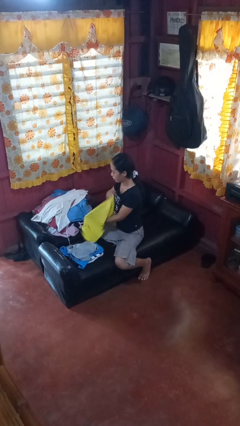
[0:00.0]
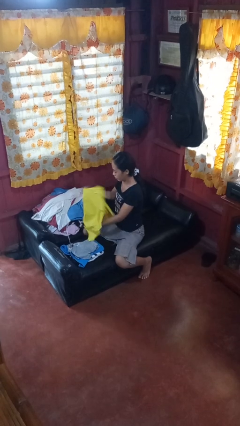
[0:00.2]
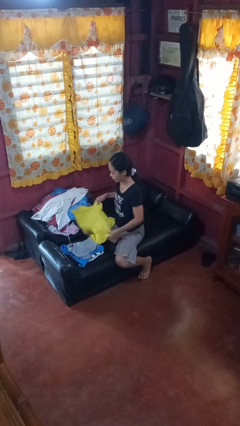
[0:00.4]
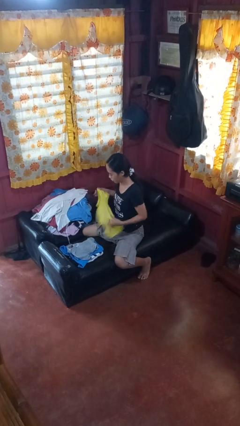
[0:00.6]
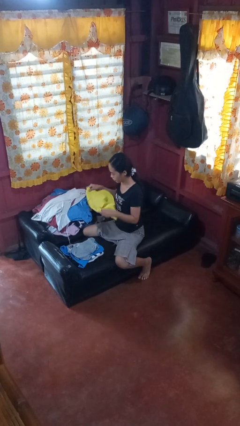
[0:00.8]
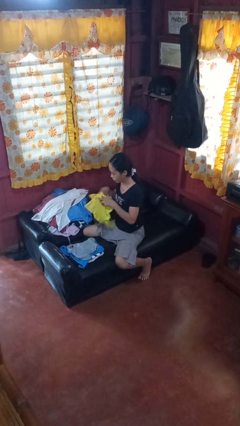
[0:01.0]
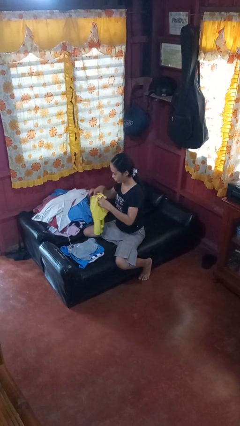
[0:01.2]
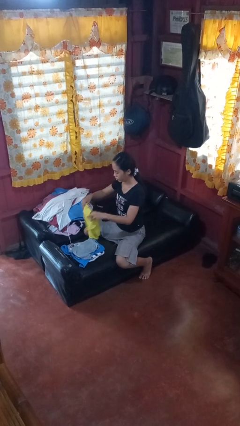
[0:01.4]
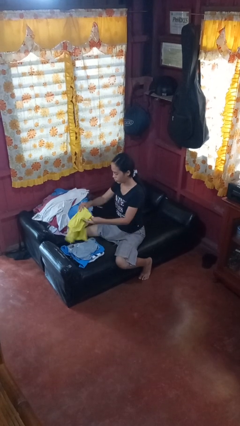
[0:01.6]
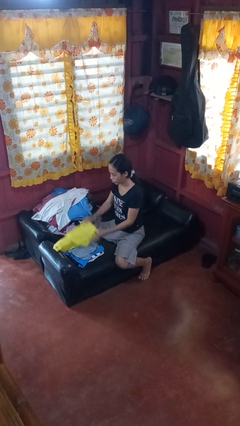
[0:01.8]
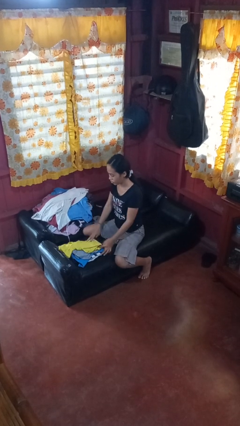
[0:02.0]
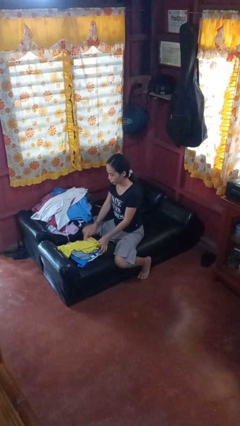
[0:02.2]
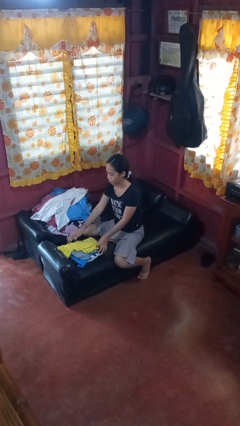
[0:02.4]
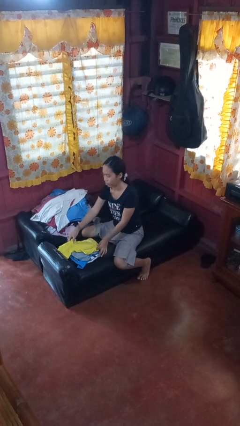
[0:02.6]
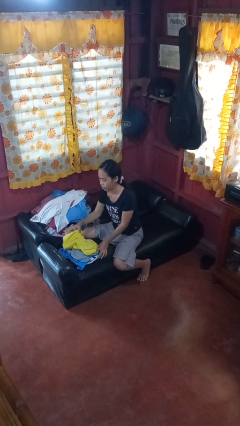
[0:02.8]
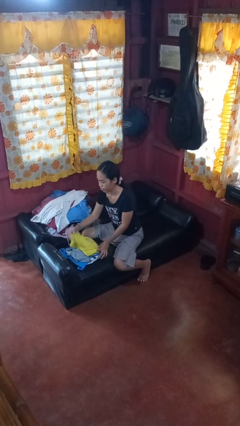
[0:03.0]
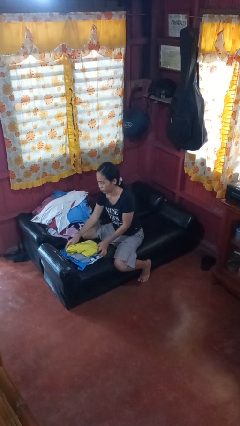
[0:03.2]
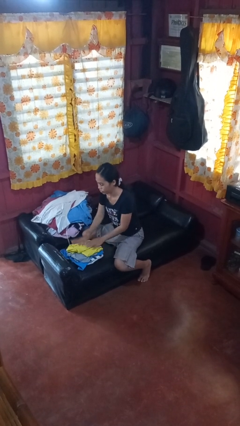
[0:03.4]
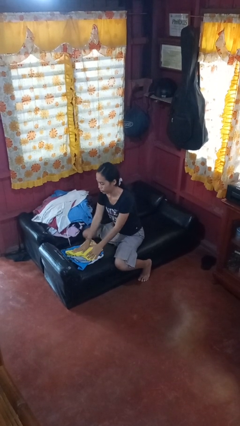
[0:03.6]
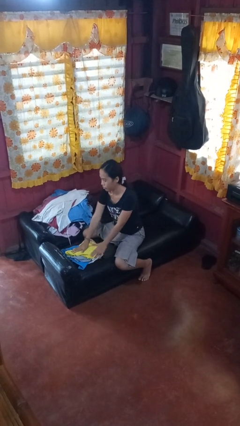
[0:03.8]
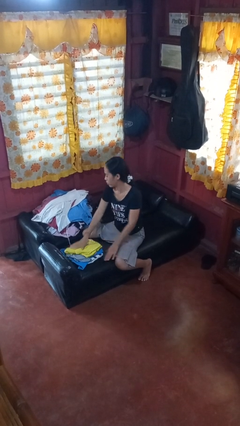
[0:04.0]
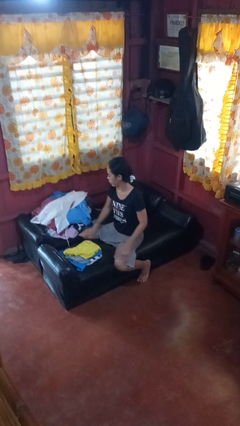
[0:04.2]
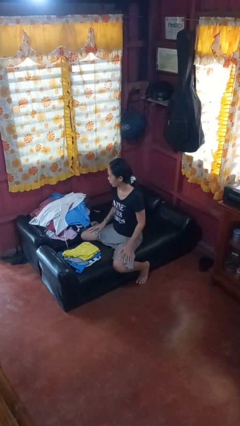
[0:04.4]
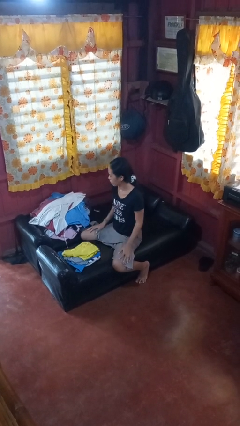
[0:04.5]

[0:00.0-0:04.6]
person folds shirt

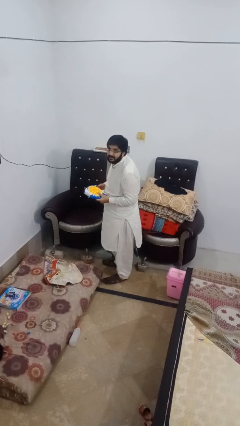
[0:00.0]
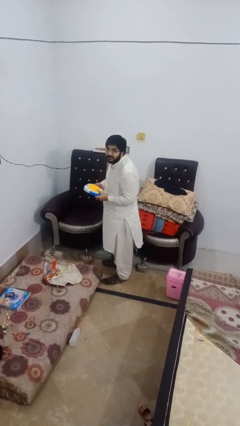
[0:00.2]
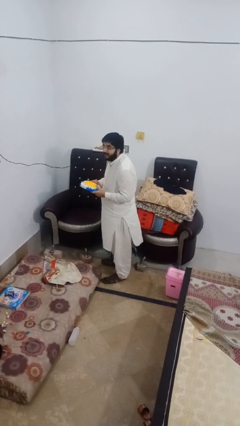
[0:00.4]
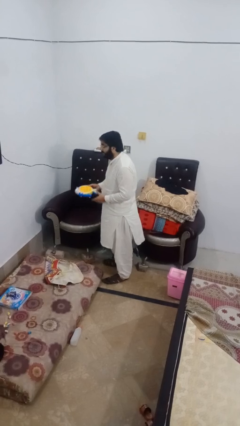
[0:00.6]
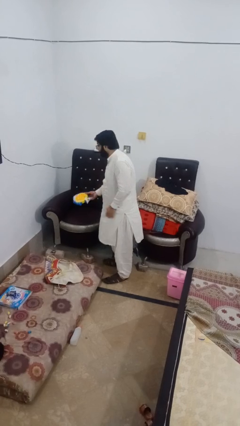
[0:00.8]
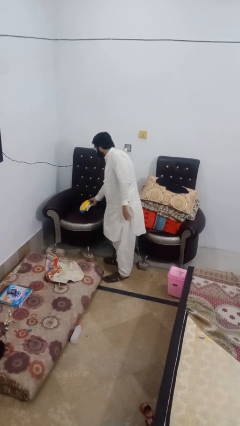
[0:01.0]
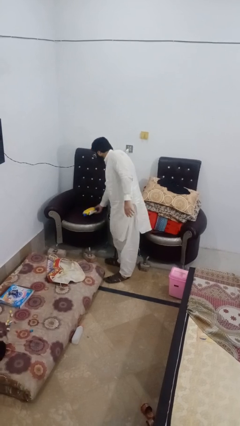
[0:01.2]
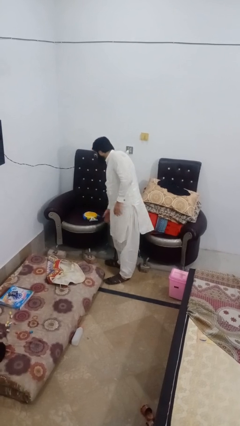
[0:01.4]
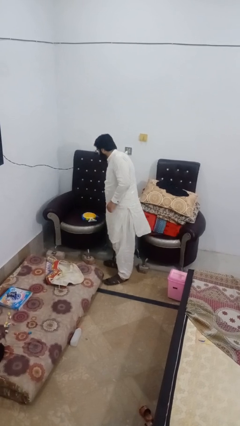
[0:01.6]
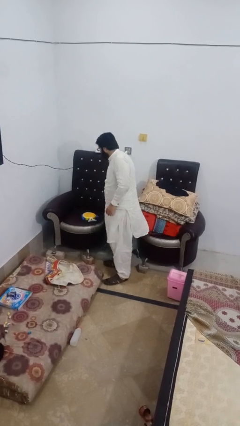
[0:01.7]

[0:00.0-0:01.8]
person puts down object on couch

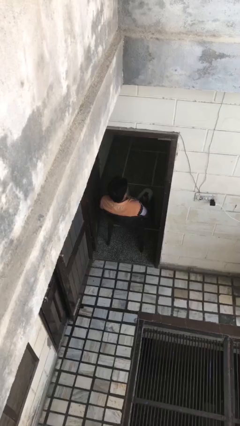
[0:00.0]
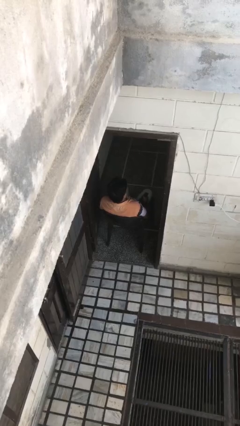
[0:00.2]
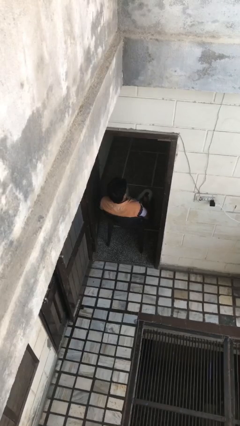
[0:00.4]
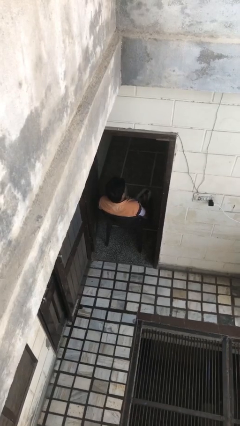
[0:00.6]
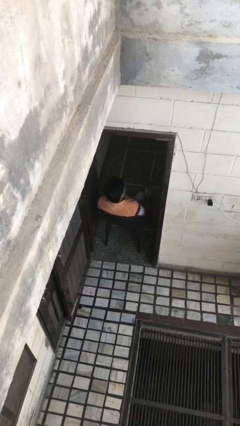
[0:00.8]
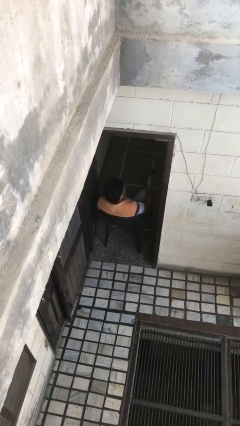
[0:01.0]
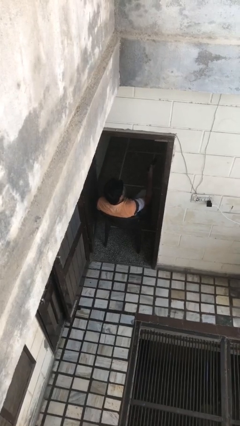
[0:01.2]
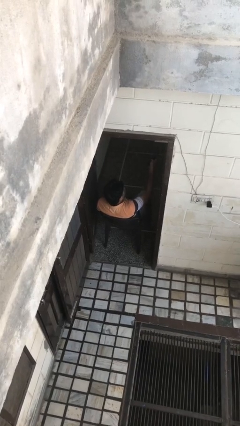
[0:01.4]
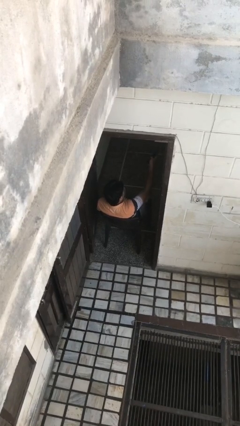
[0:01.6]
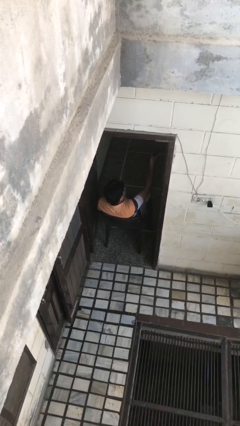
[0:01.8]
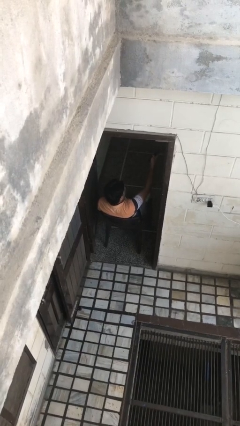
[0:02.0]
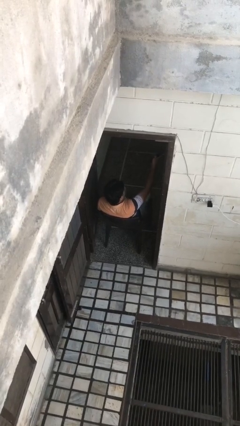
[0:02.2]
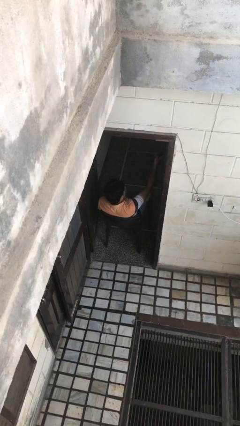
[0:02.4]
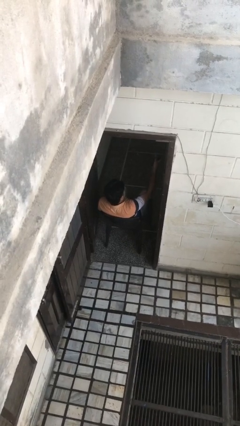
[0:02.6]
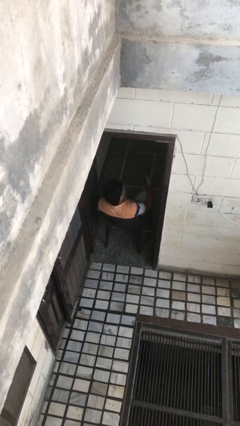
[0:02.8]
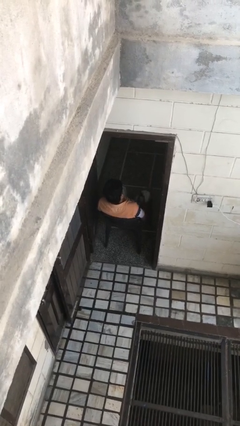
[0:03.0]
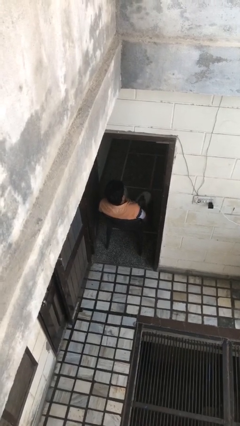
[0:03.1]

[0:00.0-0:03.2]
person uses television remote

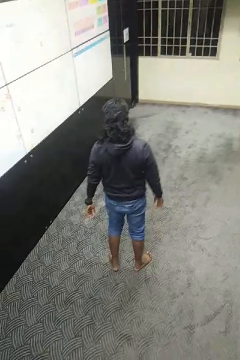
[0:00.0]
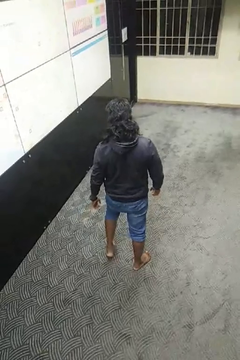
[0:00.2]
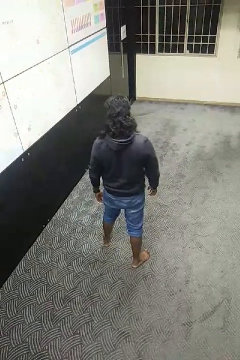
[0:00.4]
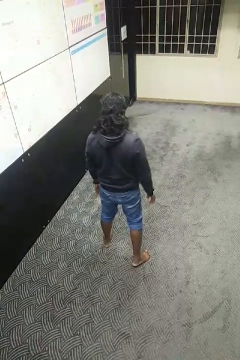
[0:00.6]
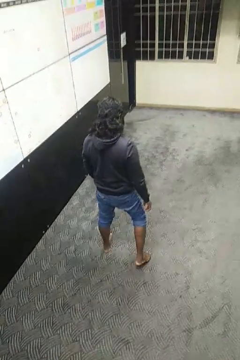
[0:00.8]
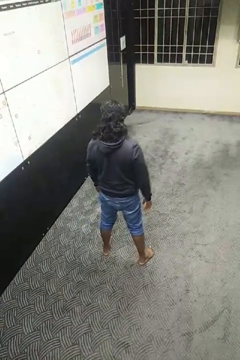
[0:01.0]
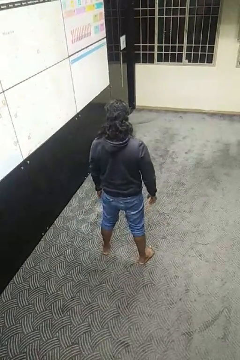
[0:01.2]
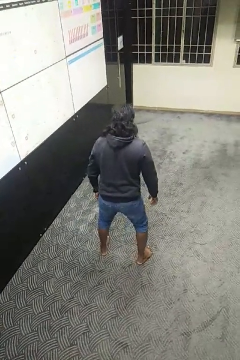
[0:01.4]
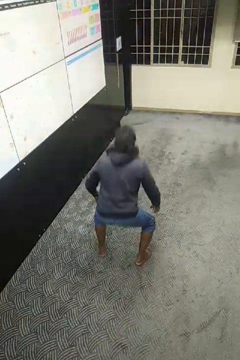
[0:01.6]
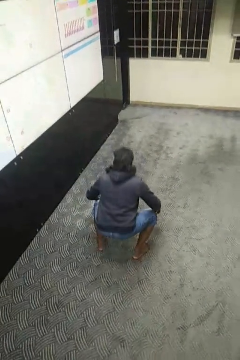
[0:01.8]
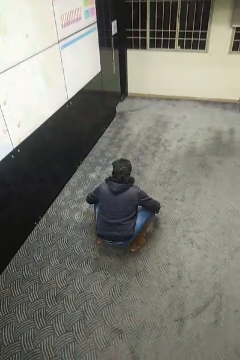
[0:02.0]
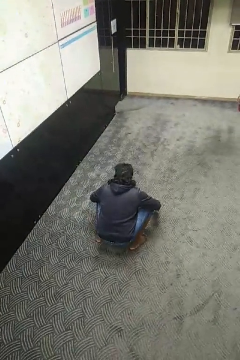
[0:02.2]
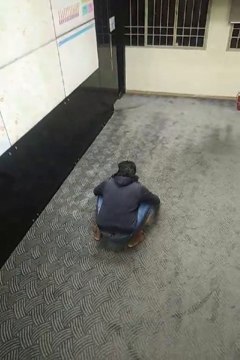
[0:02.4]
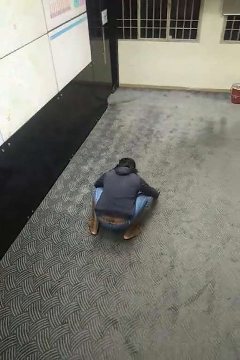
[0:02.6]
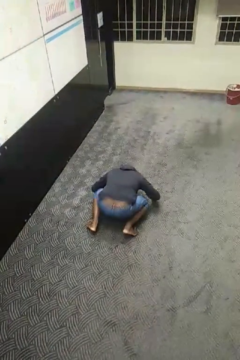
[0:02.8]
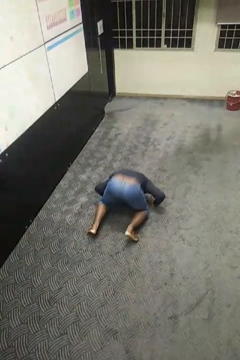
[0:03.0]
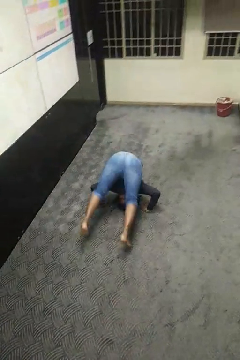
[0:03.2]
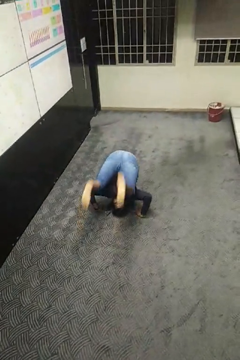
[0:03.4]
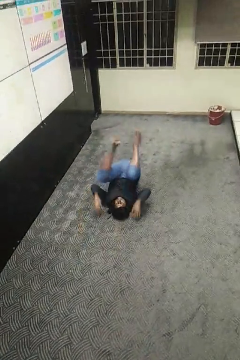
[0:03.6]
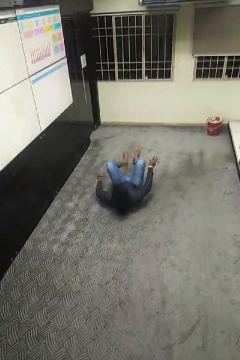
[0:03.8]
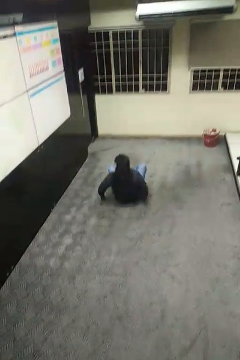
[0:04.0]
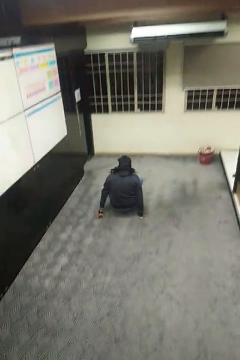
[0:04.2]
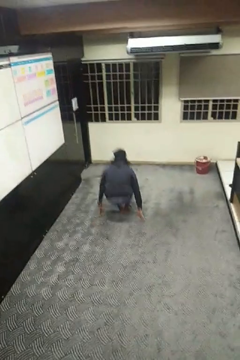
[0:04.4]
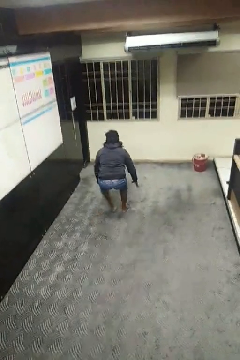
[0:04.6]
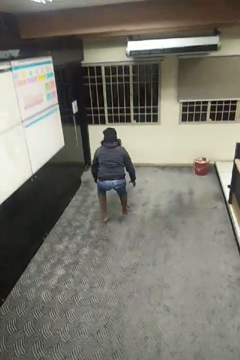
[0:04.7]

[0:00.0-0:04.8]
person somersaults

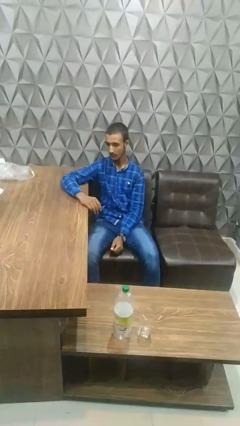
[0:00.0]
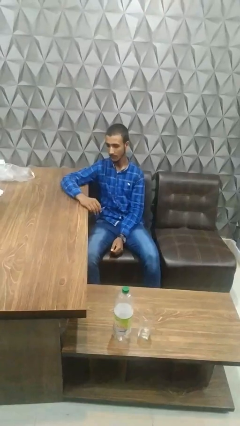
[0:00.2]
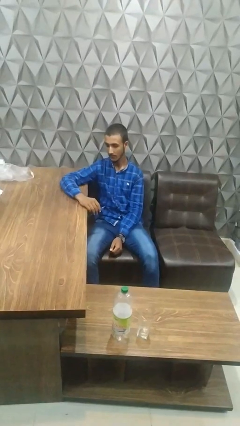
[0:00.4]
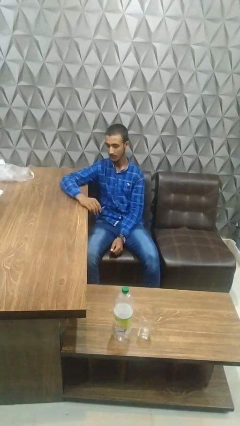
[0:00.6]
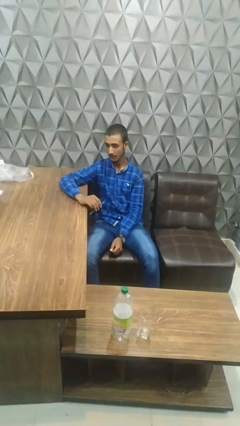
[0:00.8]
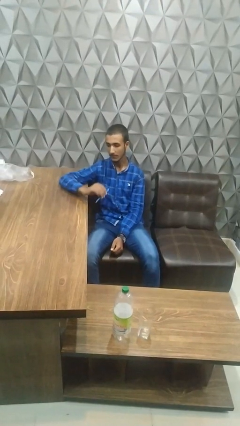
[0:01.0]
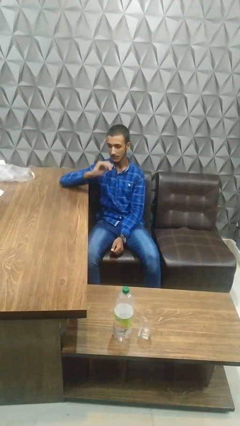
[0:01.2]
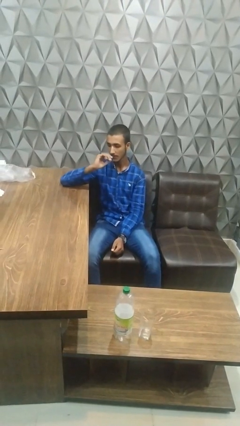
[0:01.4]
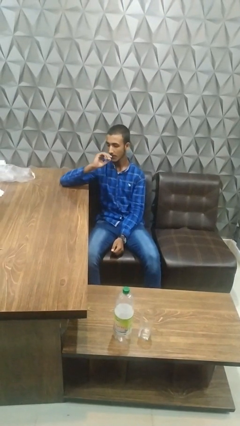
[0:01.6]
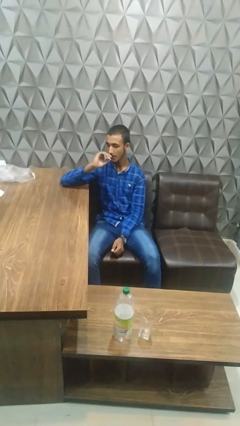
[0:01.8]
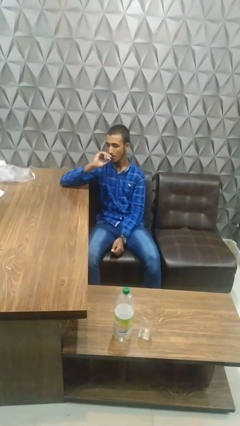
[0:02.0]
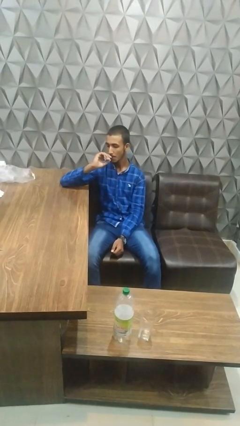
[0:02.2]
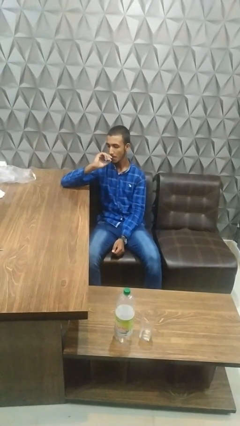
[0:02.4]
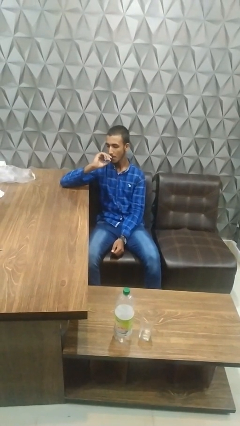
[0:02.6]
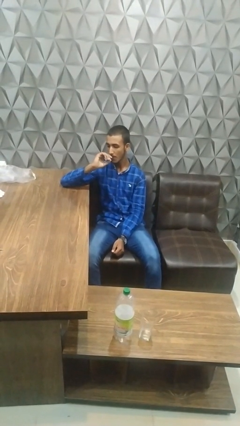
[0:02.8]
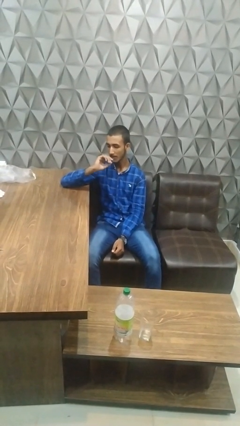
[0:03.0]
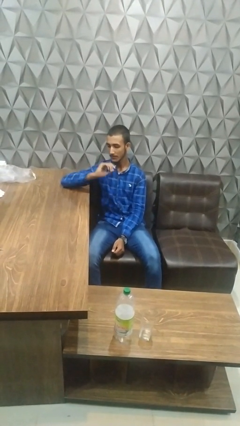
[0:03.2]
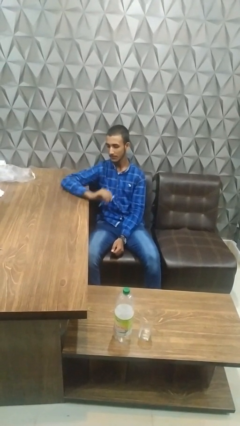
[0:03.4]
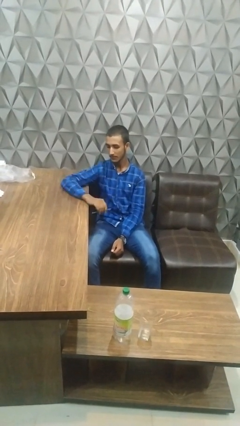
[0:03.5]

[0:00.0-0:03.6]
person vapes

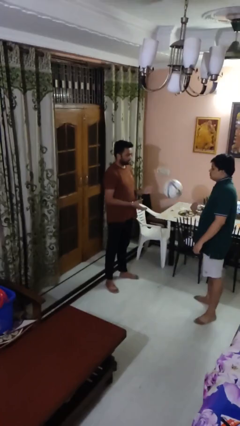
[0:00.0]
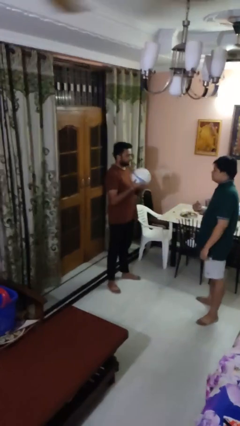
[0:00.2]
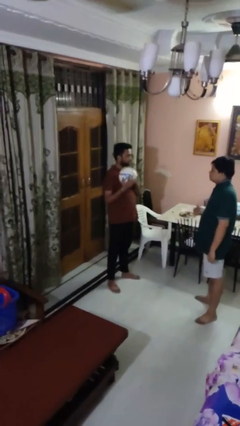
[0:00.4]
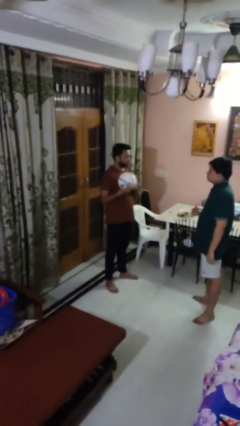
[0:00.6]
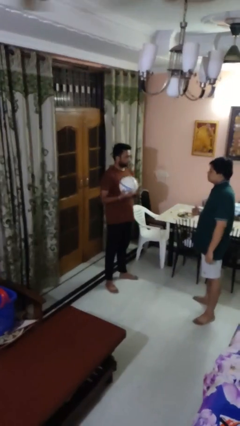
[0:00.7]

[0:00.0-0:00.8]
person catches object from person
